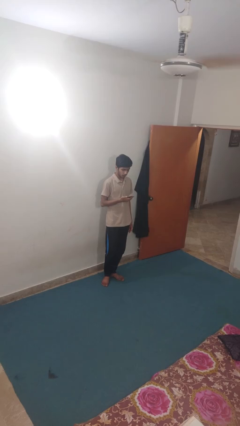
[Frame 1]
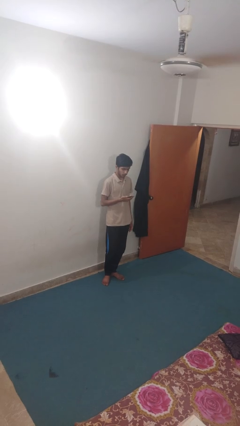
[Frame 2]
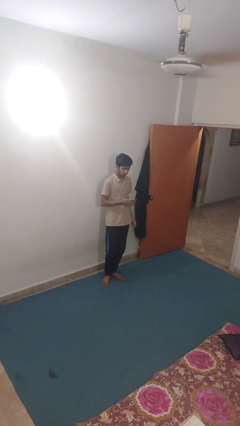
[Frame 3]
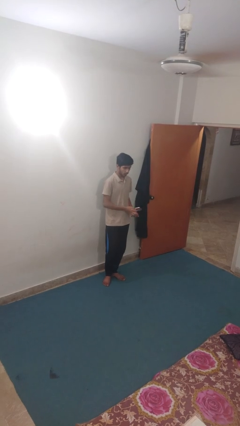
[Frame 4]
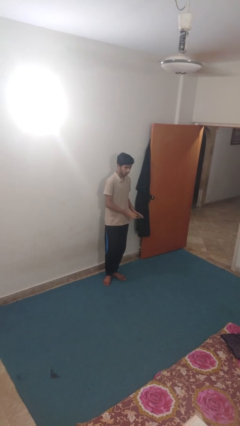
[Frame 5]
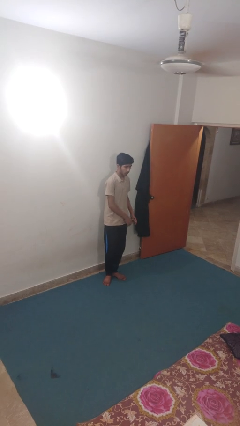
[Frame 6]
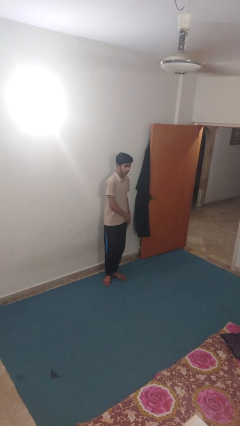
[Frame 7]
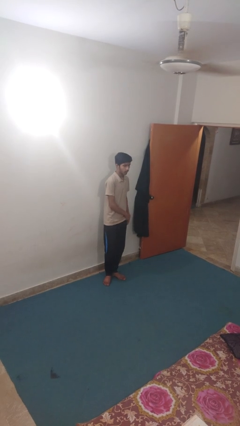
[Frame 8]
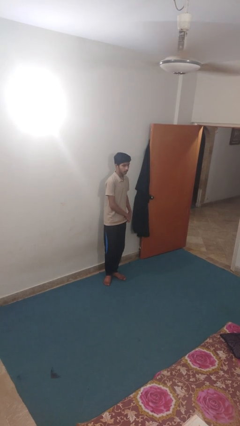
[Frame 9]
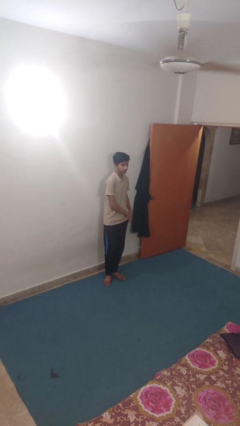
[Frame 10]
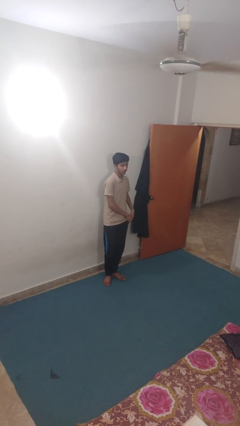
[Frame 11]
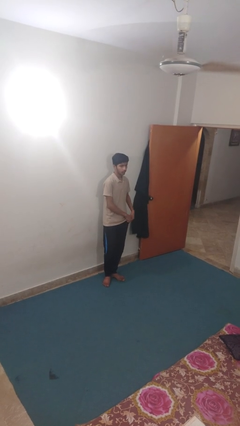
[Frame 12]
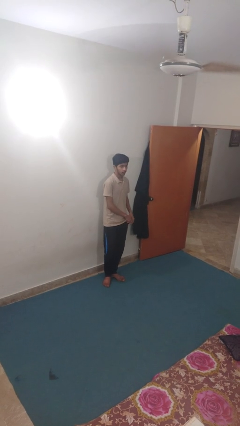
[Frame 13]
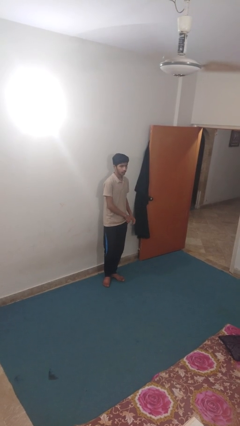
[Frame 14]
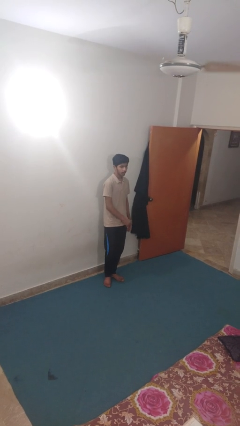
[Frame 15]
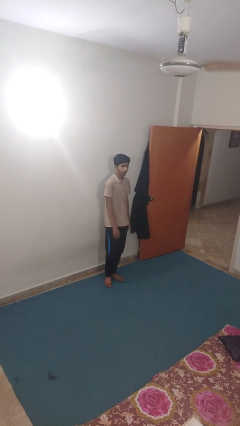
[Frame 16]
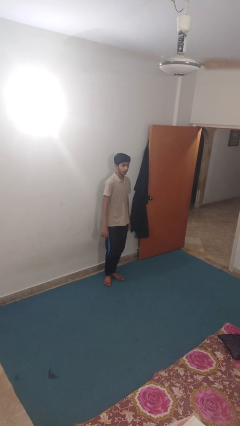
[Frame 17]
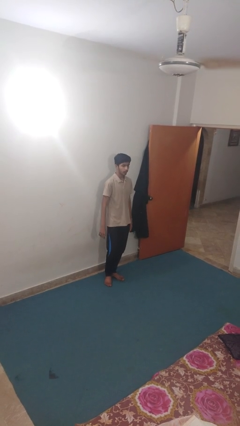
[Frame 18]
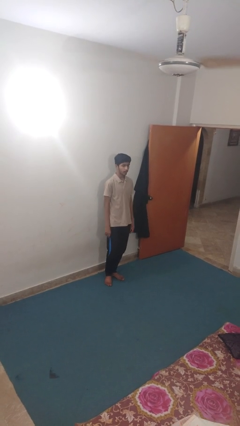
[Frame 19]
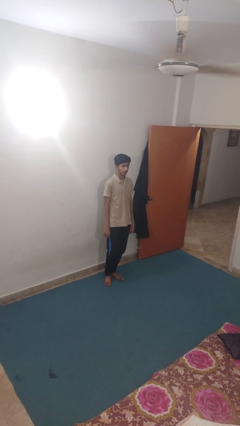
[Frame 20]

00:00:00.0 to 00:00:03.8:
person puts phone into pocket

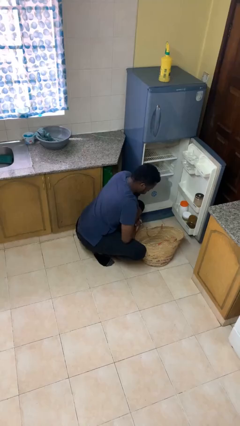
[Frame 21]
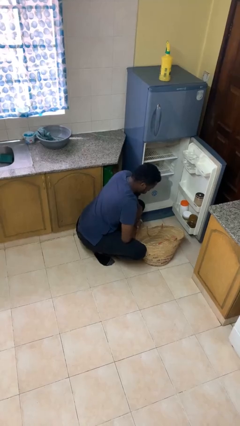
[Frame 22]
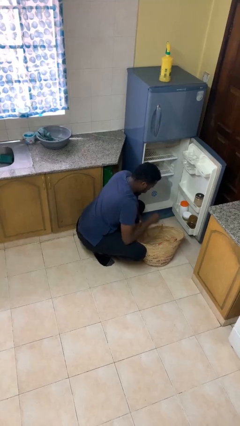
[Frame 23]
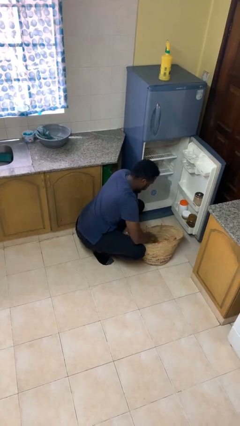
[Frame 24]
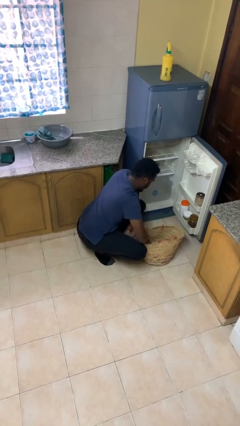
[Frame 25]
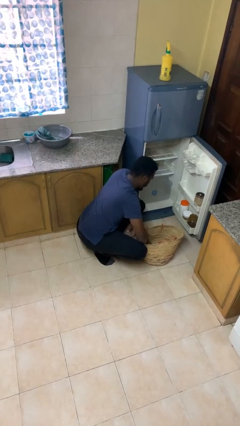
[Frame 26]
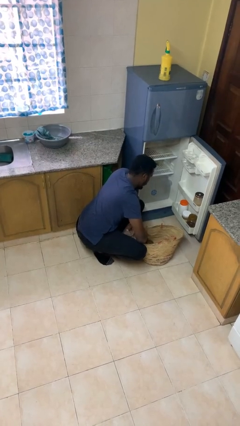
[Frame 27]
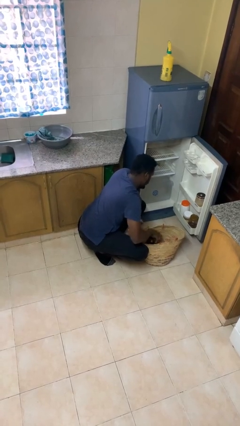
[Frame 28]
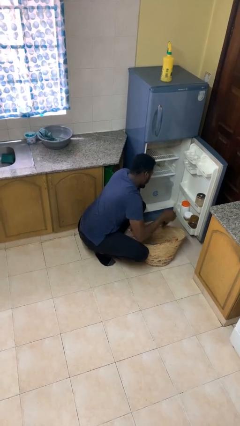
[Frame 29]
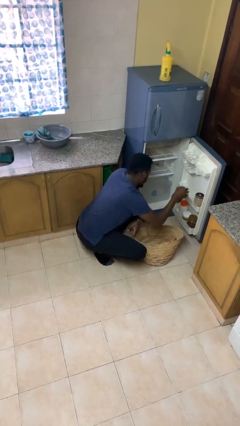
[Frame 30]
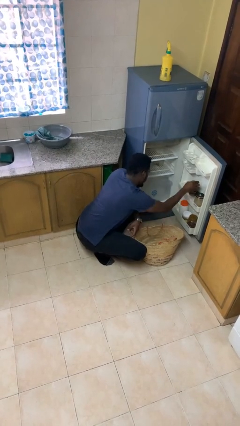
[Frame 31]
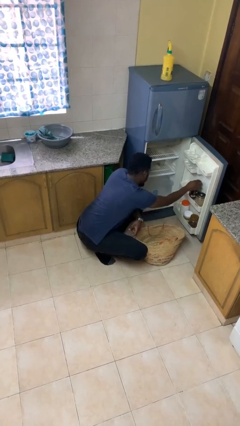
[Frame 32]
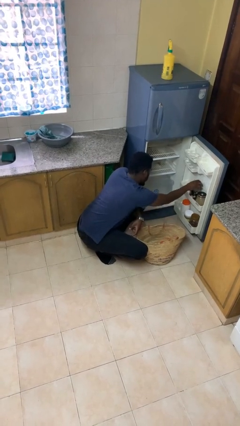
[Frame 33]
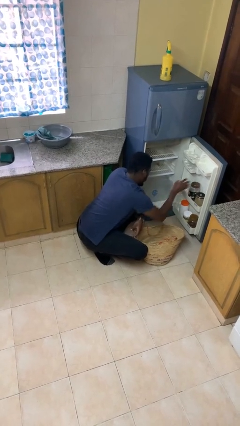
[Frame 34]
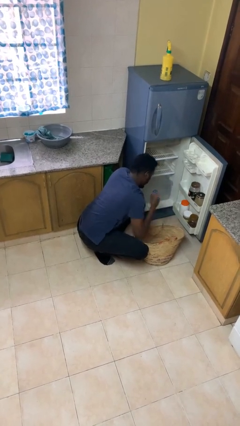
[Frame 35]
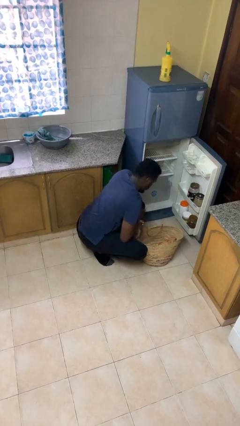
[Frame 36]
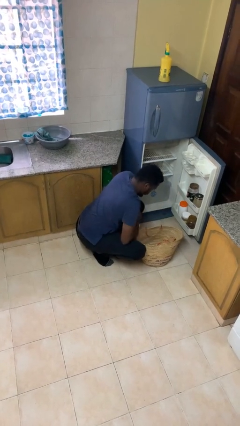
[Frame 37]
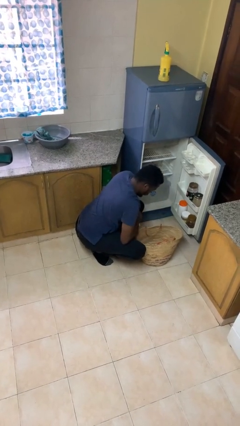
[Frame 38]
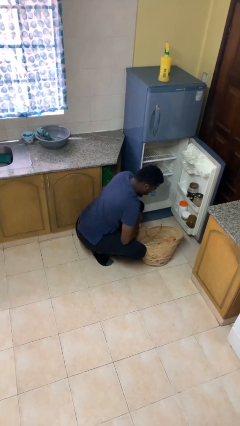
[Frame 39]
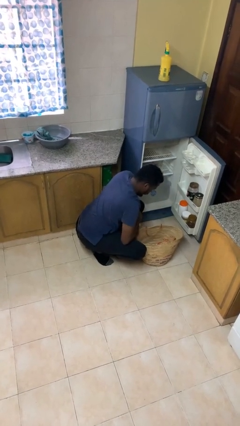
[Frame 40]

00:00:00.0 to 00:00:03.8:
person loads groceries into refrigerator

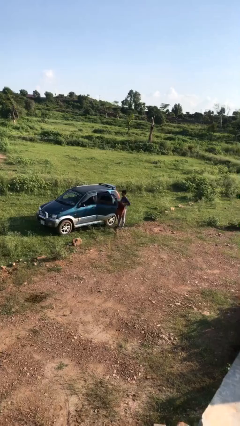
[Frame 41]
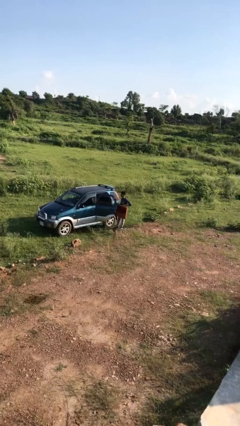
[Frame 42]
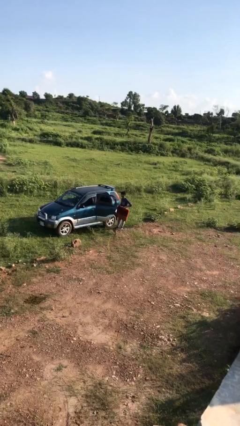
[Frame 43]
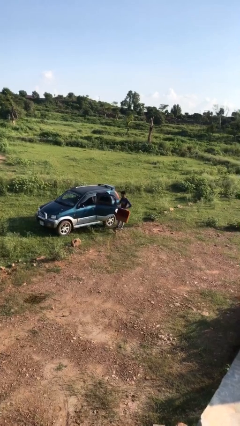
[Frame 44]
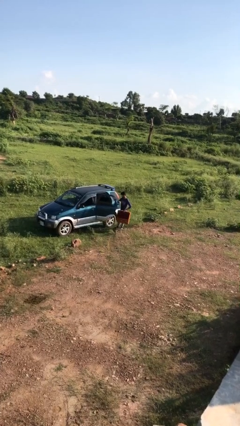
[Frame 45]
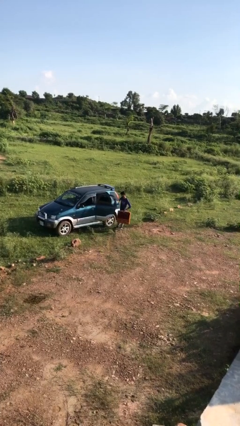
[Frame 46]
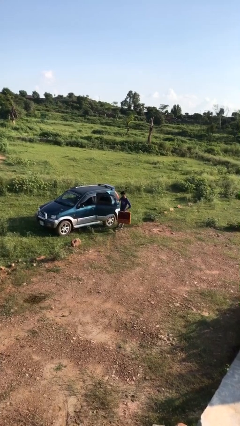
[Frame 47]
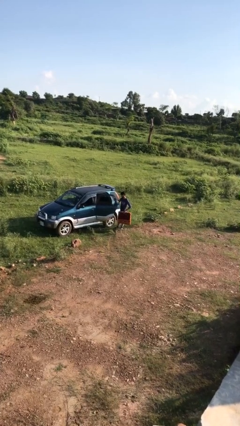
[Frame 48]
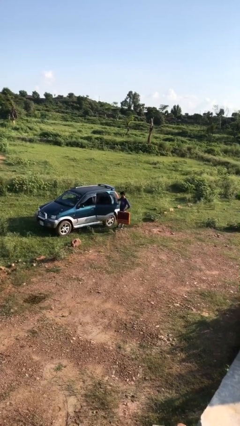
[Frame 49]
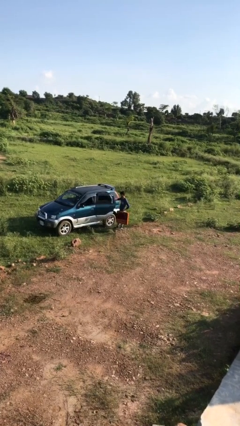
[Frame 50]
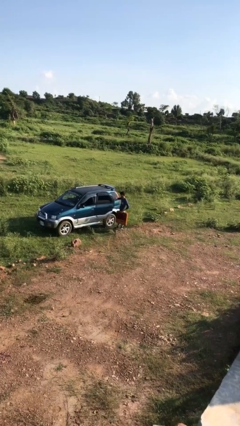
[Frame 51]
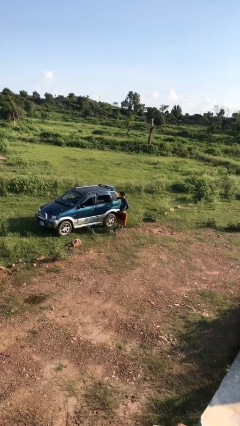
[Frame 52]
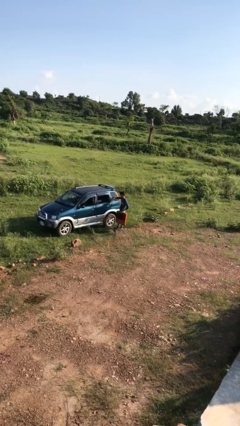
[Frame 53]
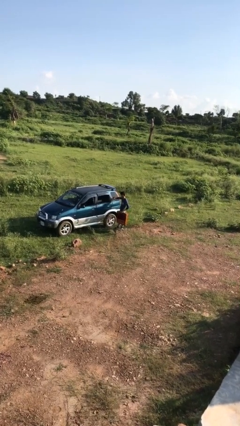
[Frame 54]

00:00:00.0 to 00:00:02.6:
person closes car door

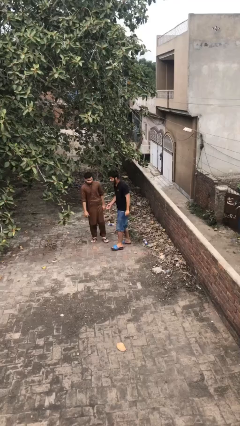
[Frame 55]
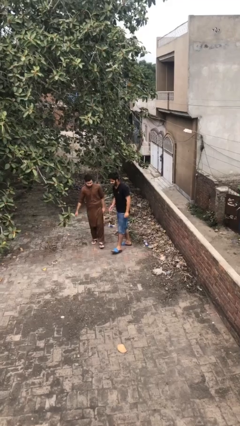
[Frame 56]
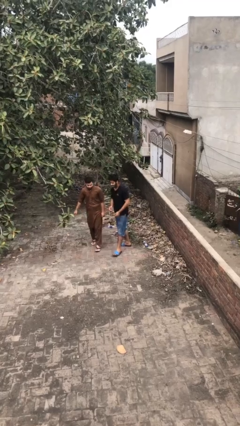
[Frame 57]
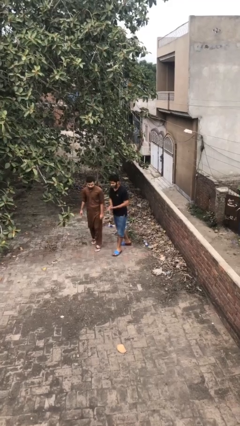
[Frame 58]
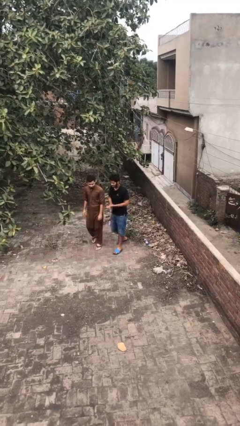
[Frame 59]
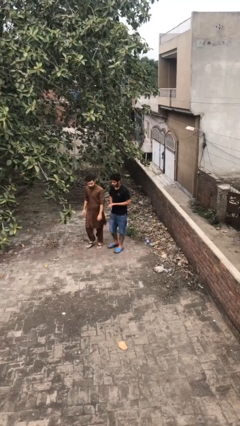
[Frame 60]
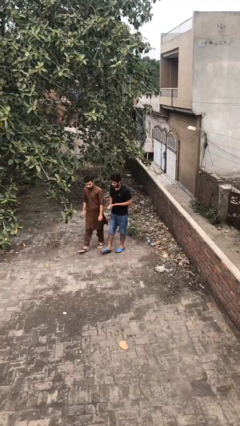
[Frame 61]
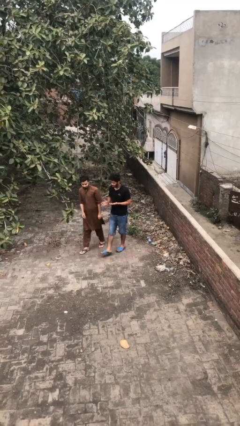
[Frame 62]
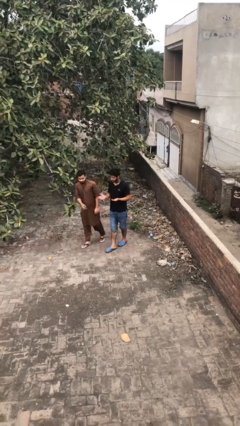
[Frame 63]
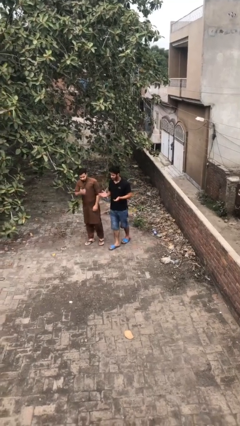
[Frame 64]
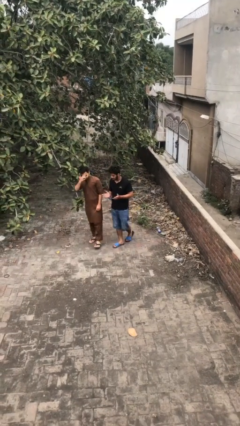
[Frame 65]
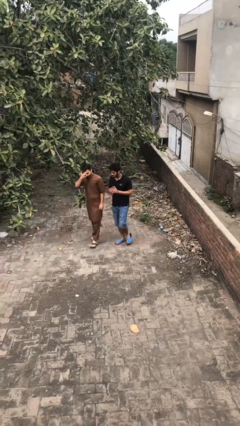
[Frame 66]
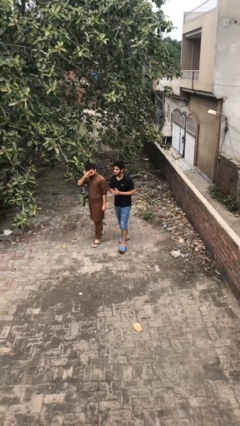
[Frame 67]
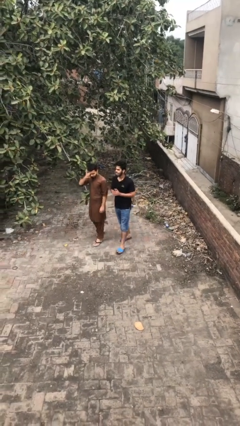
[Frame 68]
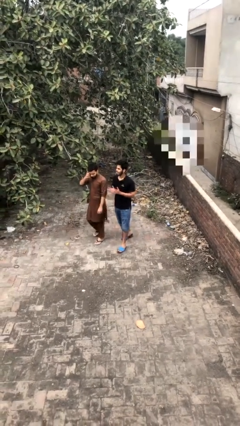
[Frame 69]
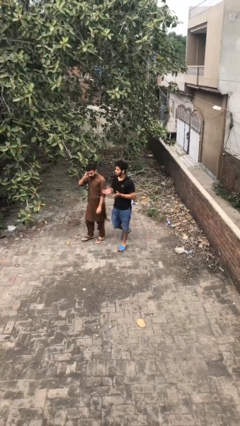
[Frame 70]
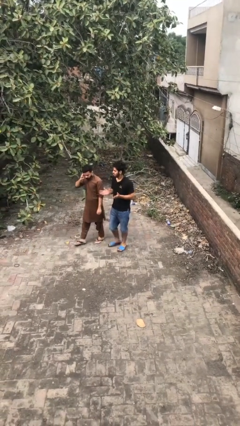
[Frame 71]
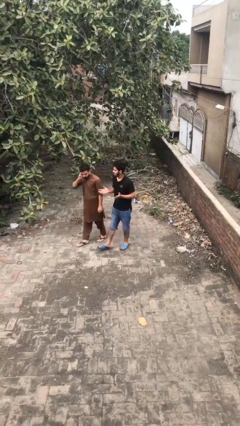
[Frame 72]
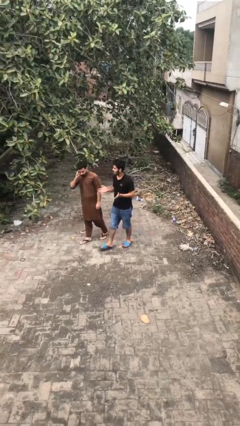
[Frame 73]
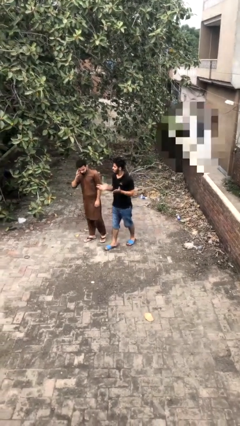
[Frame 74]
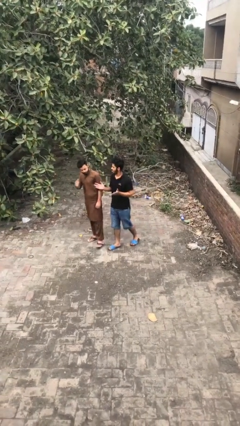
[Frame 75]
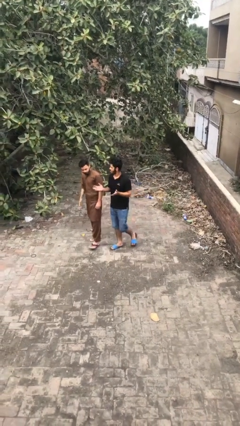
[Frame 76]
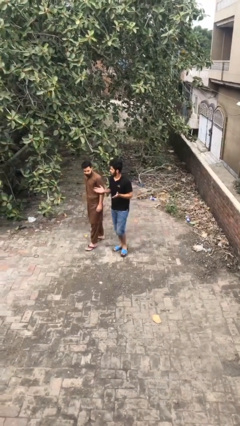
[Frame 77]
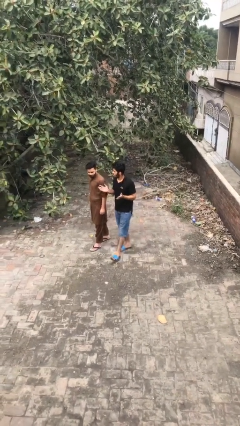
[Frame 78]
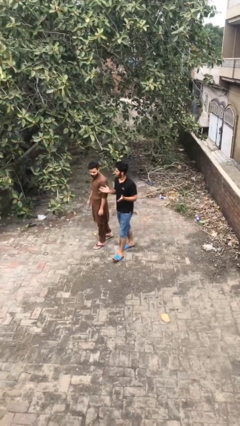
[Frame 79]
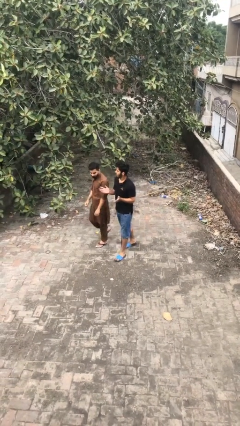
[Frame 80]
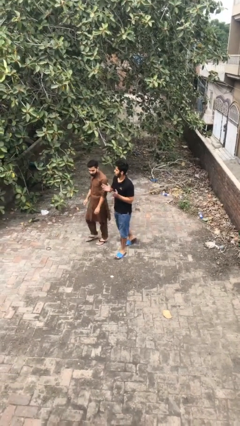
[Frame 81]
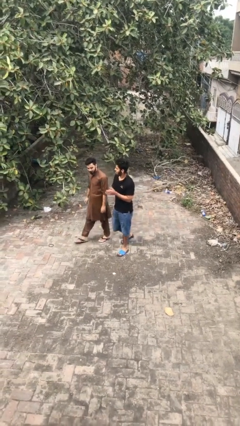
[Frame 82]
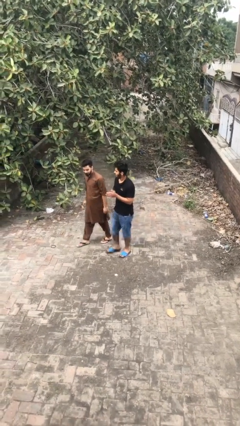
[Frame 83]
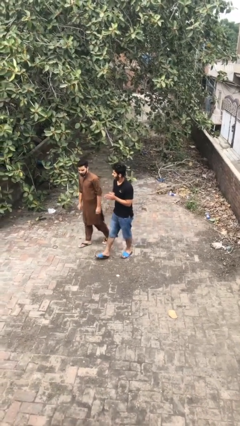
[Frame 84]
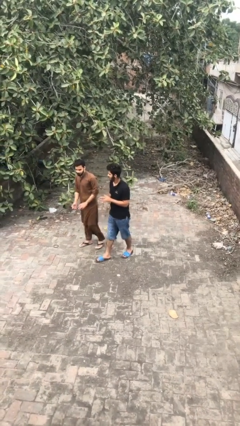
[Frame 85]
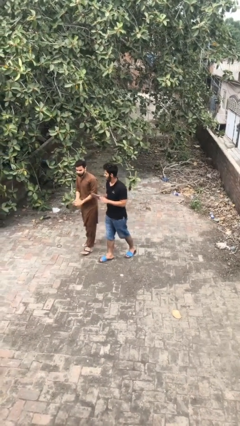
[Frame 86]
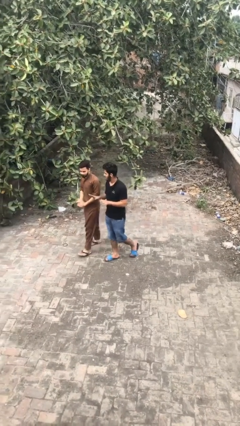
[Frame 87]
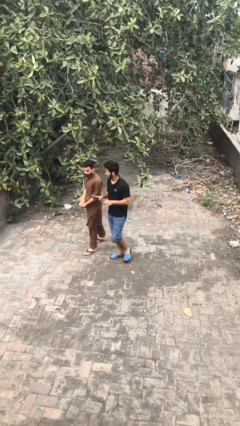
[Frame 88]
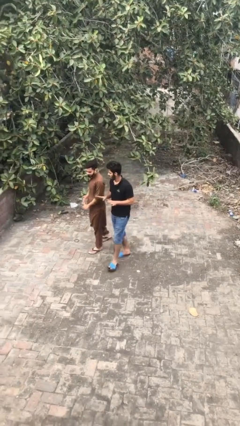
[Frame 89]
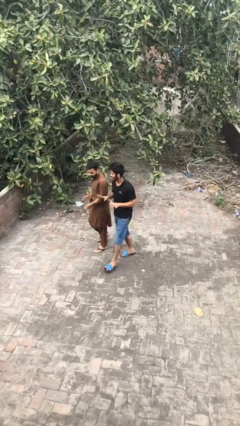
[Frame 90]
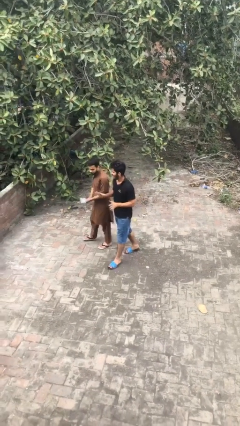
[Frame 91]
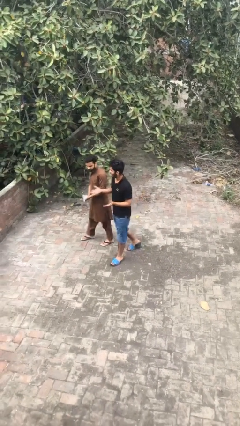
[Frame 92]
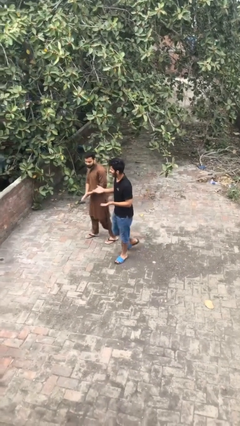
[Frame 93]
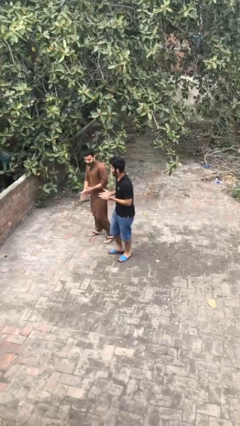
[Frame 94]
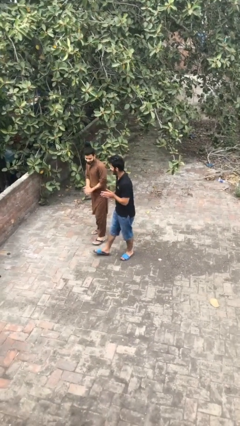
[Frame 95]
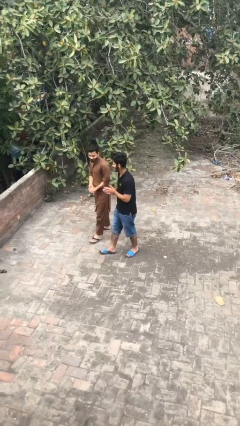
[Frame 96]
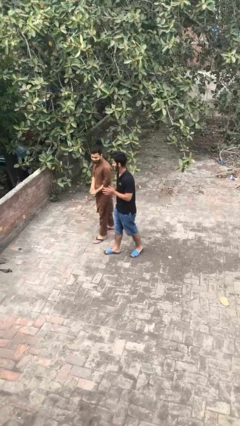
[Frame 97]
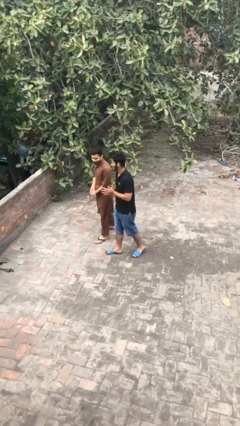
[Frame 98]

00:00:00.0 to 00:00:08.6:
person talks to person
